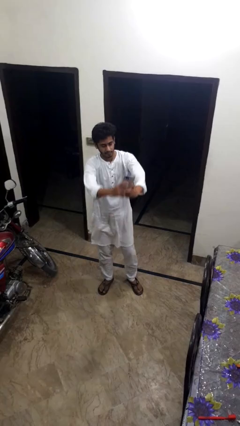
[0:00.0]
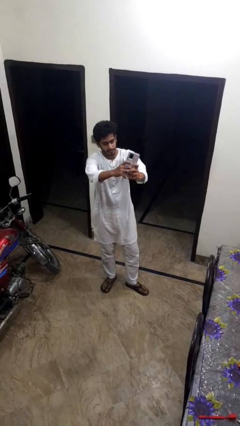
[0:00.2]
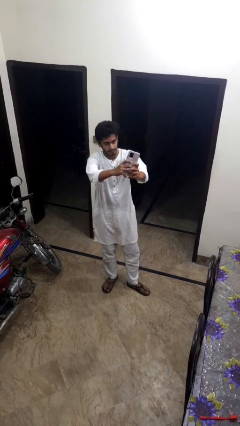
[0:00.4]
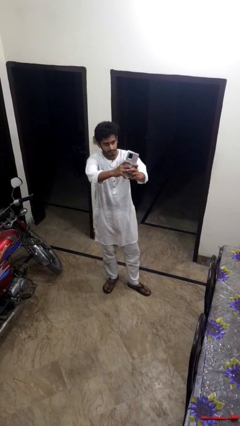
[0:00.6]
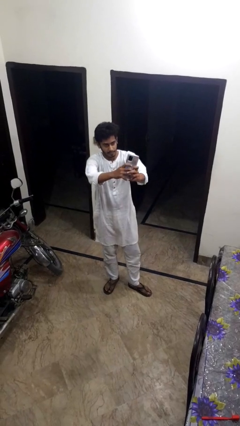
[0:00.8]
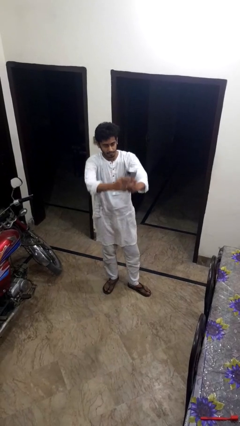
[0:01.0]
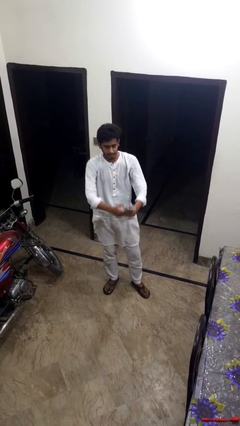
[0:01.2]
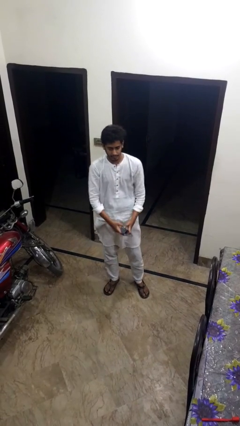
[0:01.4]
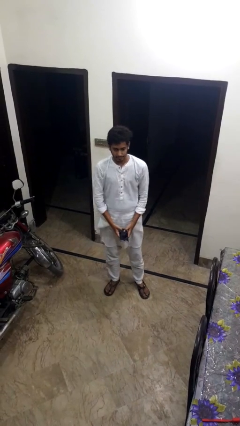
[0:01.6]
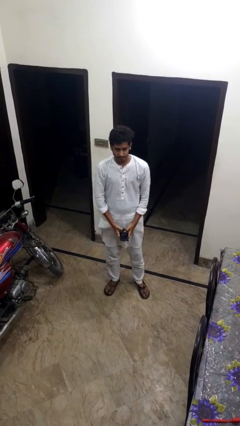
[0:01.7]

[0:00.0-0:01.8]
person takes selfie

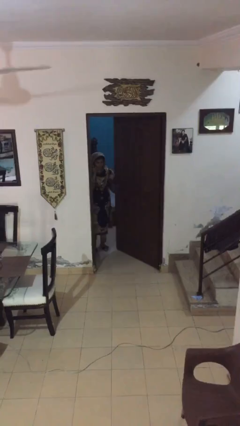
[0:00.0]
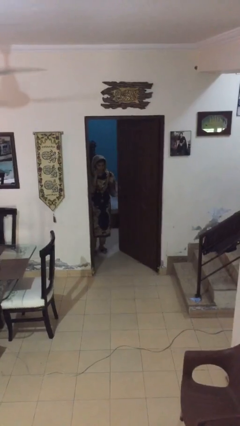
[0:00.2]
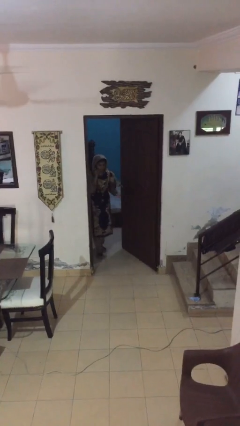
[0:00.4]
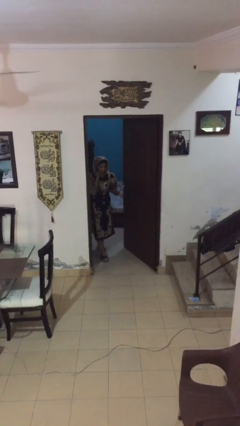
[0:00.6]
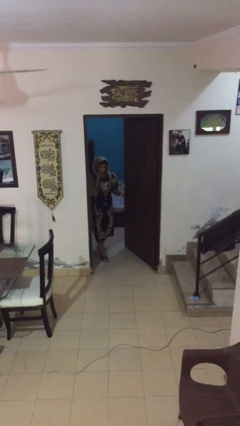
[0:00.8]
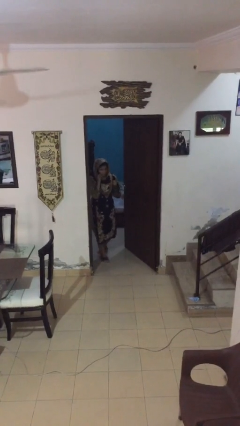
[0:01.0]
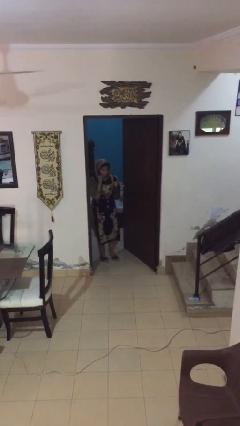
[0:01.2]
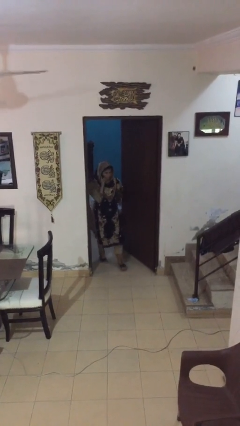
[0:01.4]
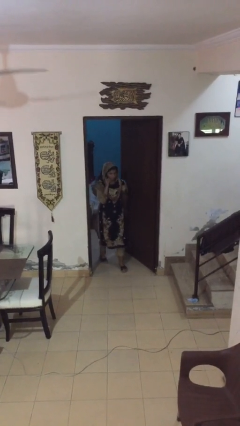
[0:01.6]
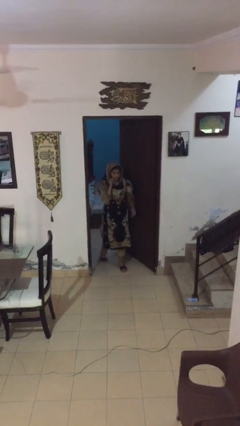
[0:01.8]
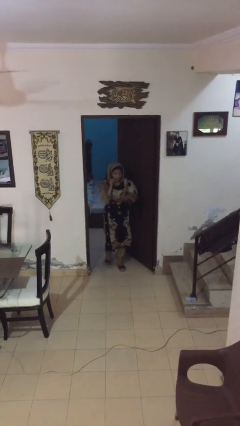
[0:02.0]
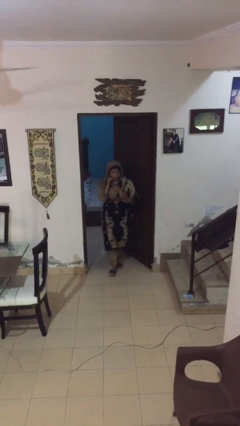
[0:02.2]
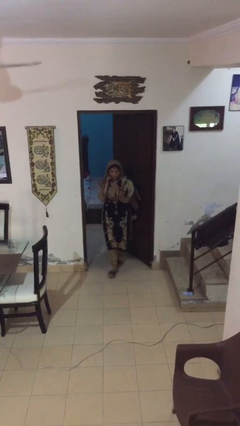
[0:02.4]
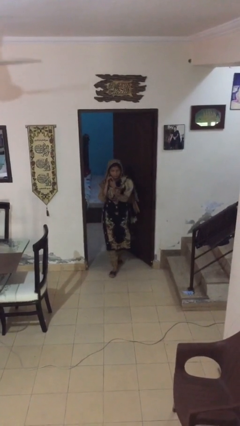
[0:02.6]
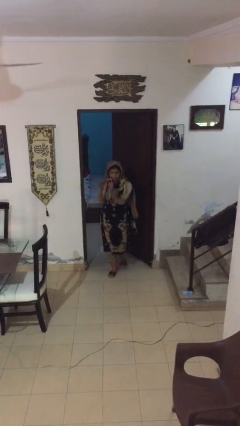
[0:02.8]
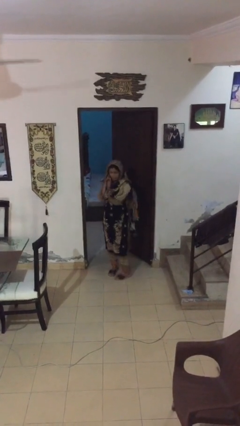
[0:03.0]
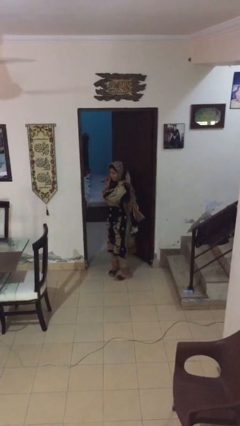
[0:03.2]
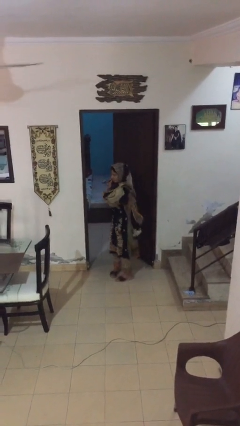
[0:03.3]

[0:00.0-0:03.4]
person enters scene through structure

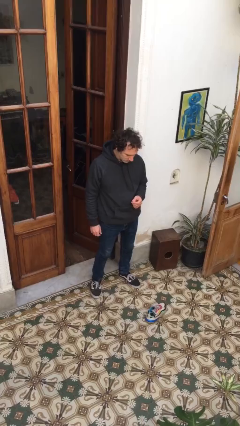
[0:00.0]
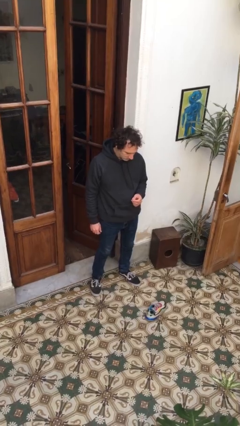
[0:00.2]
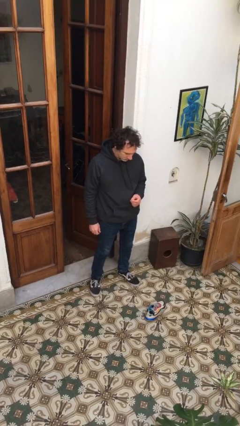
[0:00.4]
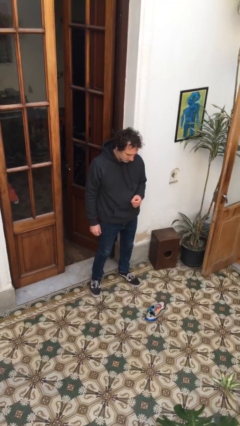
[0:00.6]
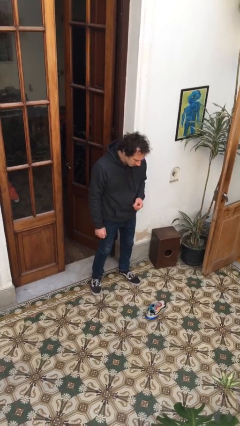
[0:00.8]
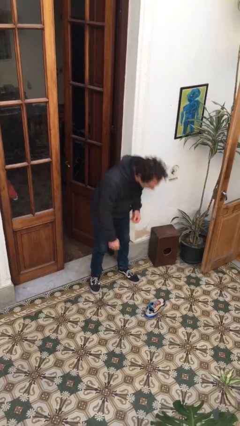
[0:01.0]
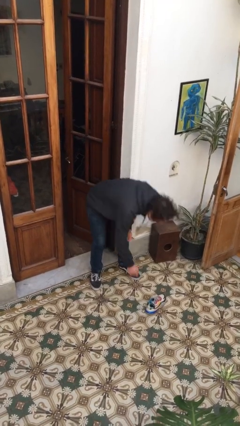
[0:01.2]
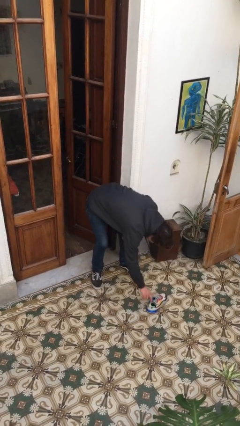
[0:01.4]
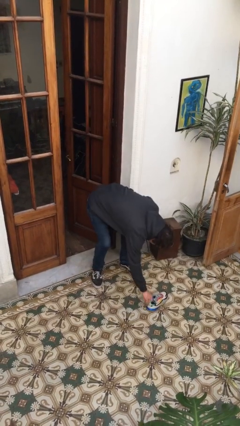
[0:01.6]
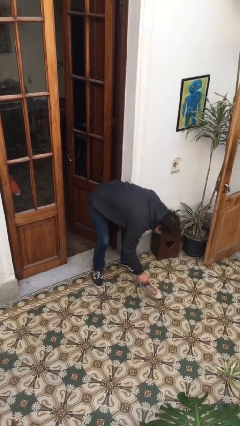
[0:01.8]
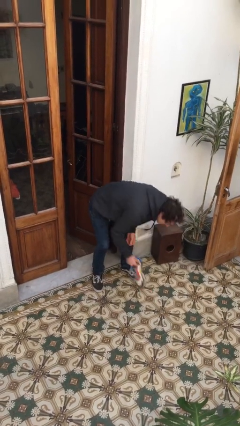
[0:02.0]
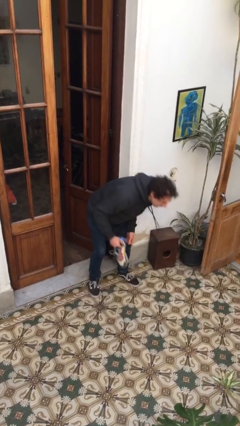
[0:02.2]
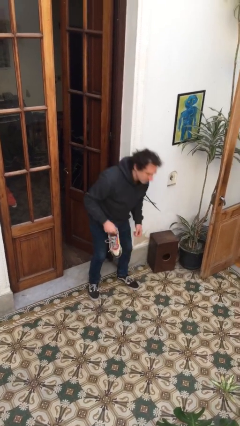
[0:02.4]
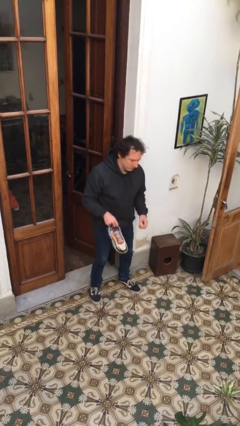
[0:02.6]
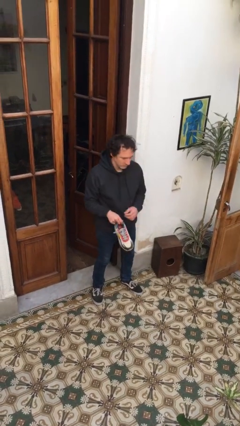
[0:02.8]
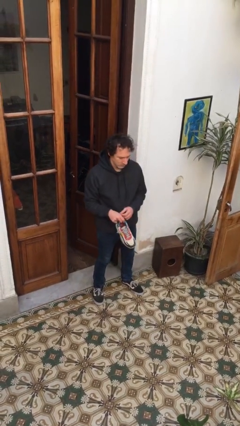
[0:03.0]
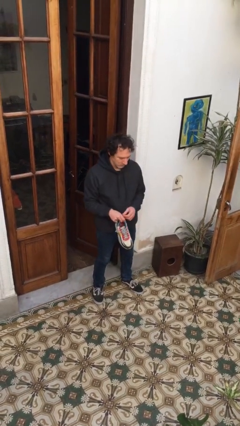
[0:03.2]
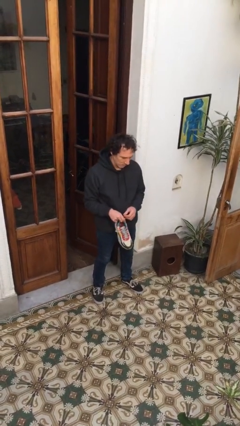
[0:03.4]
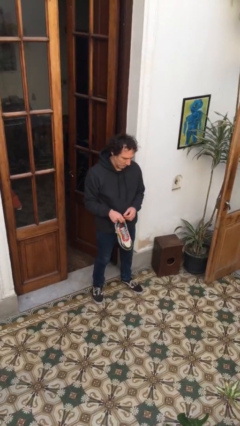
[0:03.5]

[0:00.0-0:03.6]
person picks up object from floor

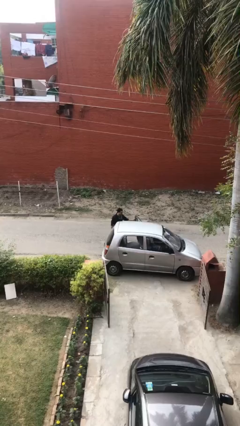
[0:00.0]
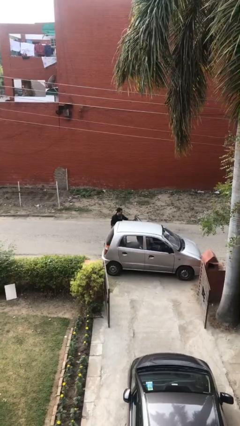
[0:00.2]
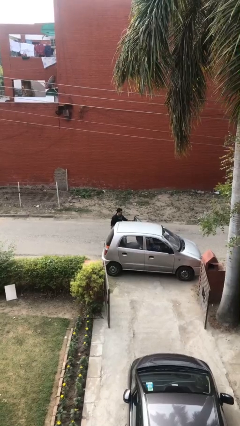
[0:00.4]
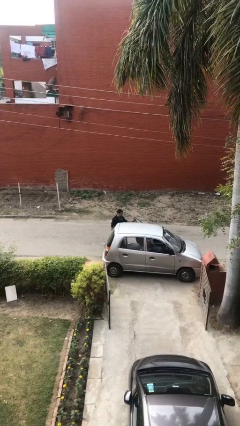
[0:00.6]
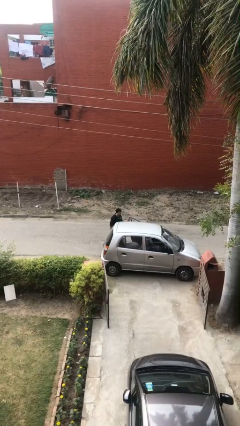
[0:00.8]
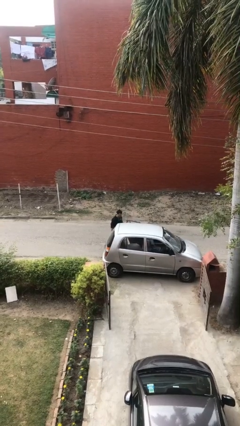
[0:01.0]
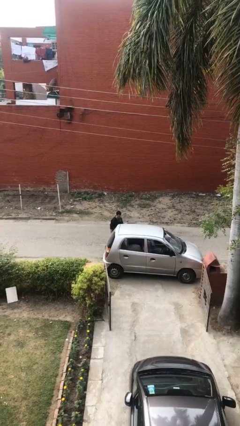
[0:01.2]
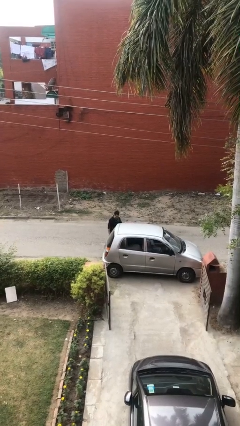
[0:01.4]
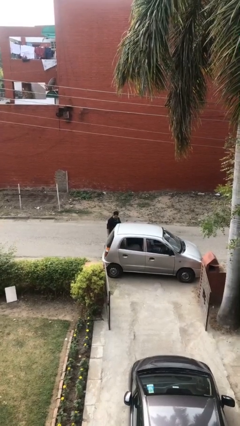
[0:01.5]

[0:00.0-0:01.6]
person closes car door

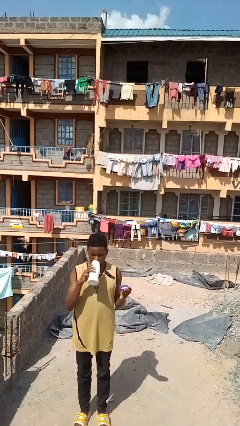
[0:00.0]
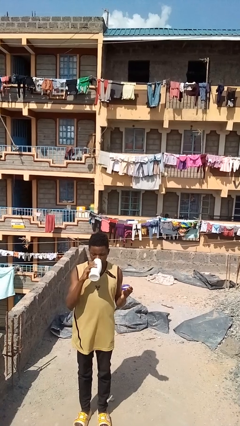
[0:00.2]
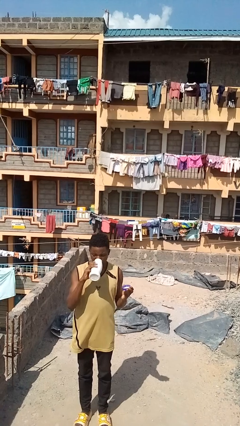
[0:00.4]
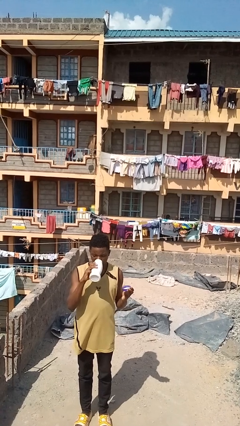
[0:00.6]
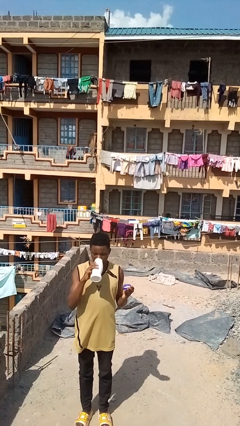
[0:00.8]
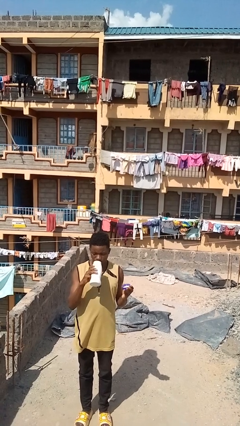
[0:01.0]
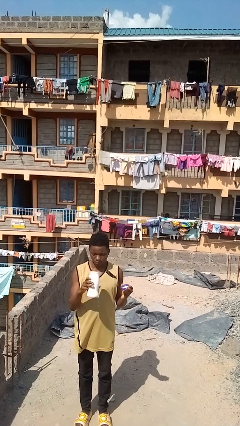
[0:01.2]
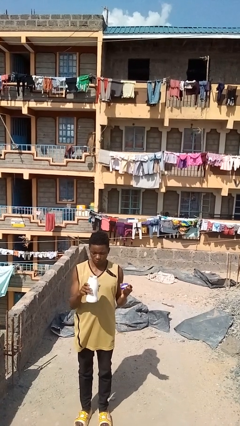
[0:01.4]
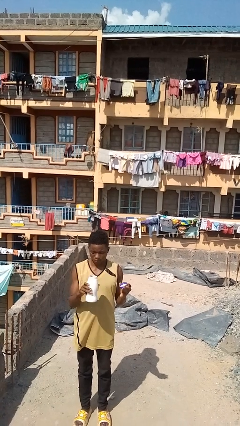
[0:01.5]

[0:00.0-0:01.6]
person drinks from beverage can

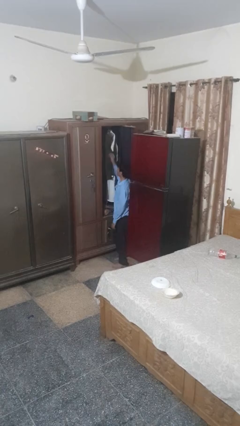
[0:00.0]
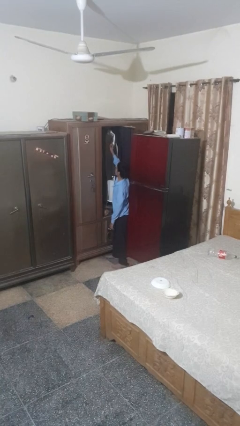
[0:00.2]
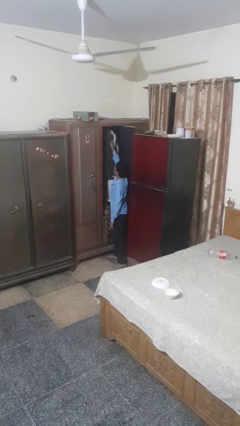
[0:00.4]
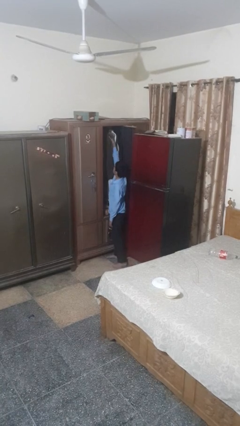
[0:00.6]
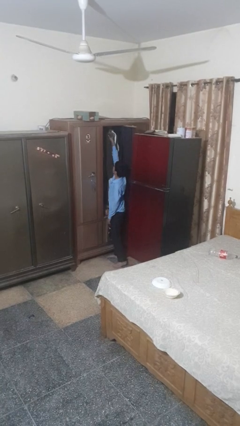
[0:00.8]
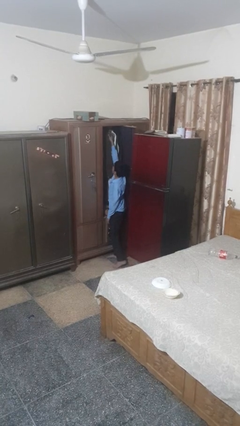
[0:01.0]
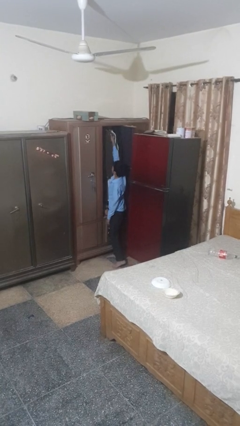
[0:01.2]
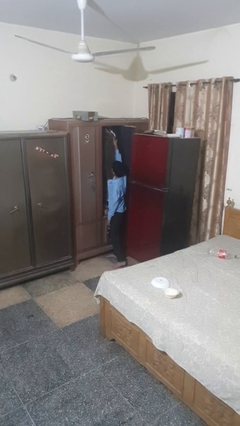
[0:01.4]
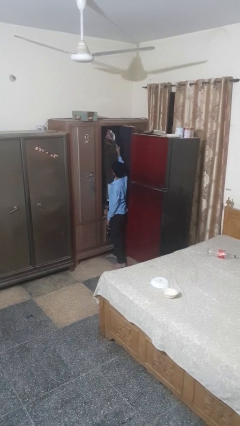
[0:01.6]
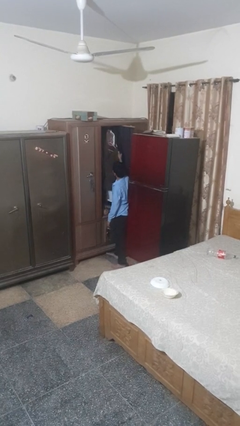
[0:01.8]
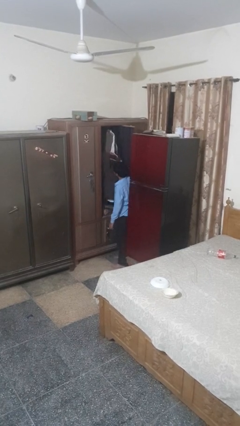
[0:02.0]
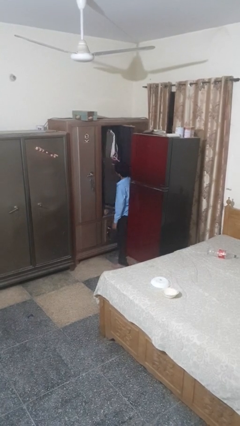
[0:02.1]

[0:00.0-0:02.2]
person takes clothes from closet

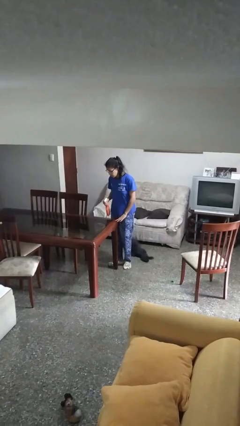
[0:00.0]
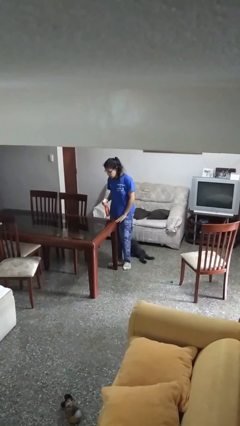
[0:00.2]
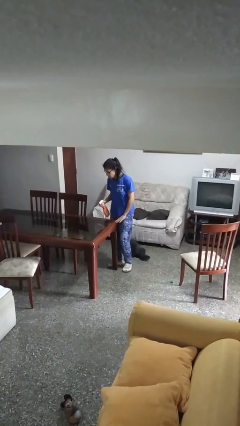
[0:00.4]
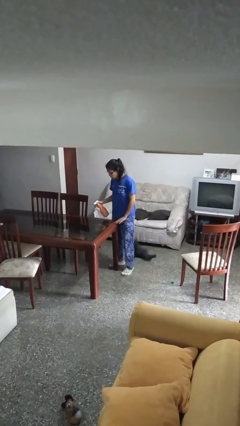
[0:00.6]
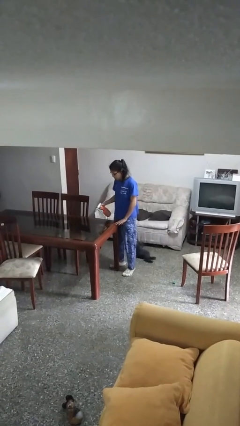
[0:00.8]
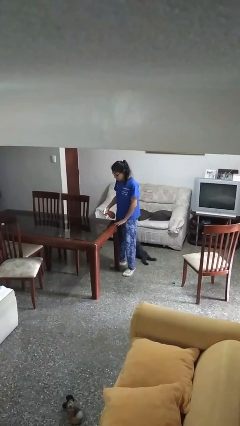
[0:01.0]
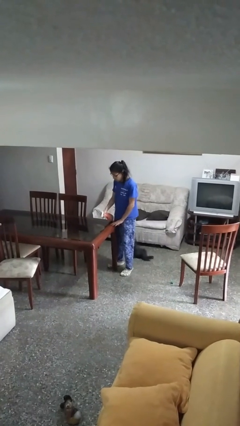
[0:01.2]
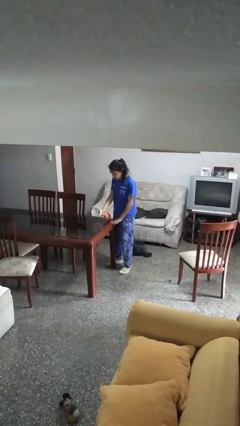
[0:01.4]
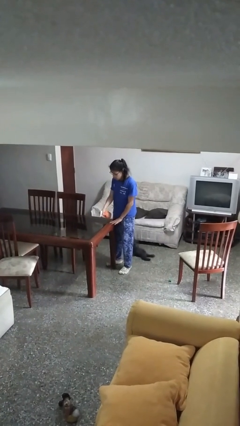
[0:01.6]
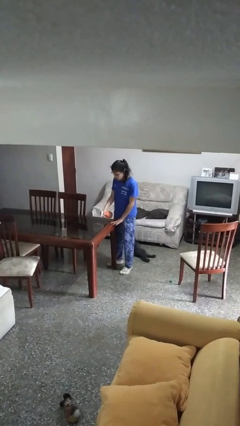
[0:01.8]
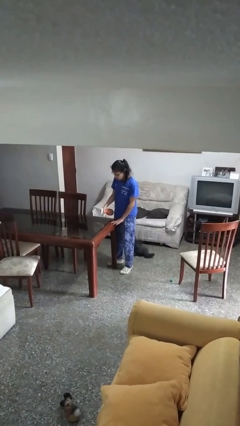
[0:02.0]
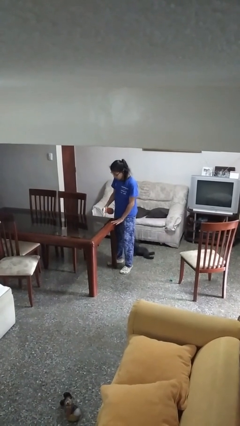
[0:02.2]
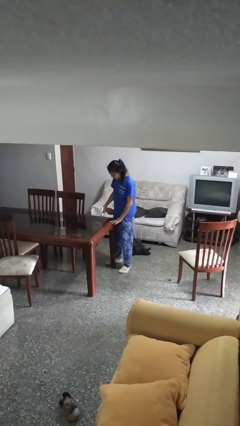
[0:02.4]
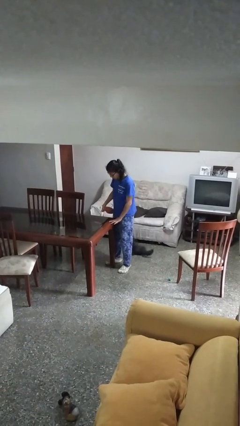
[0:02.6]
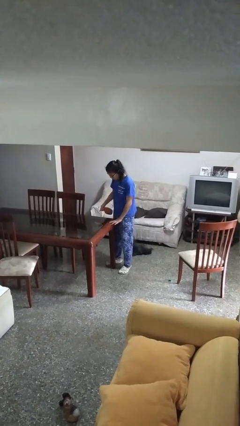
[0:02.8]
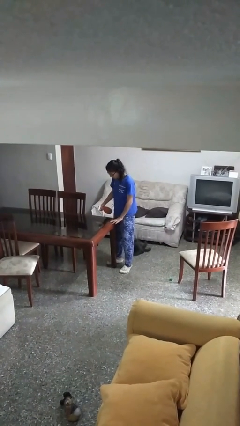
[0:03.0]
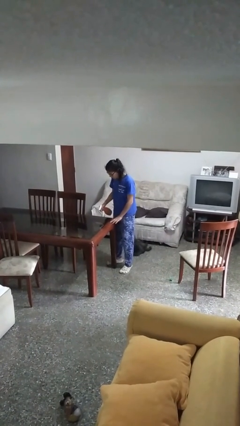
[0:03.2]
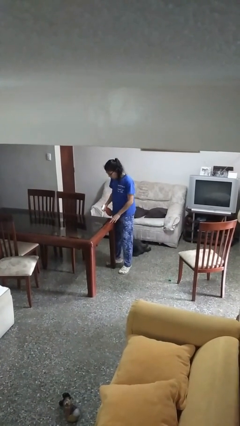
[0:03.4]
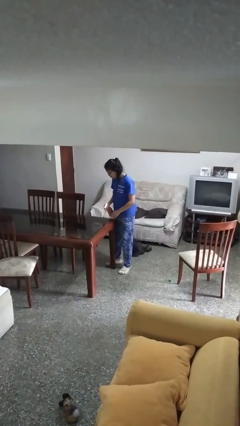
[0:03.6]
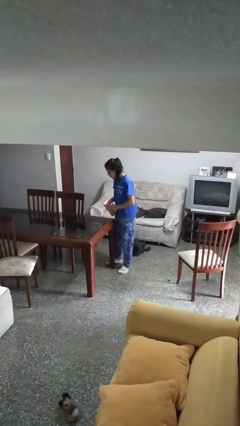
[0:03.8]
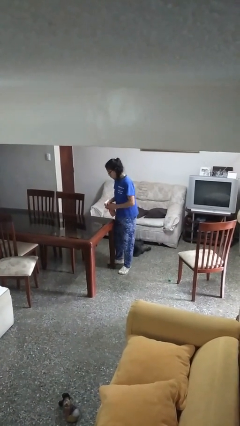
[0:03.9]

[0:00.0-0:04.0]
person sprays from bottle
